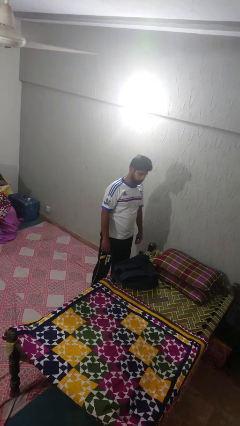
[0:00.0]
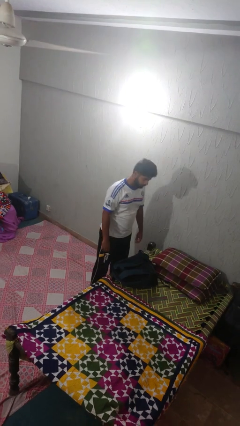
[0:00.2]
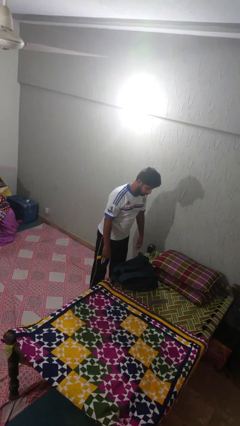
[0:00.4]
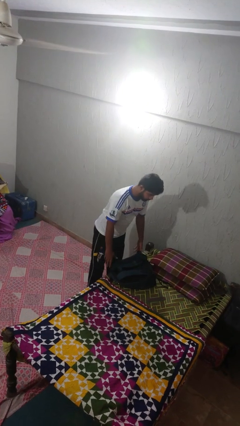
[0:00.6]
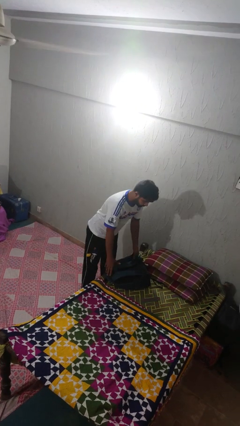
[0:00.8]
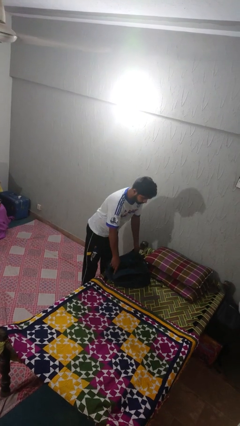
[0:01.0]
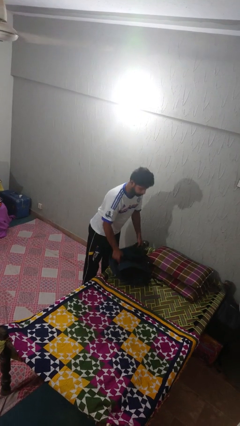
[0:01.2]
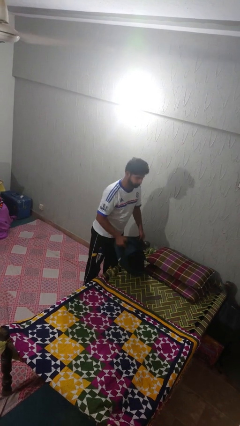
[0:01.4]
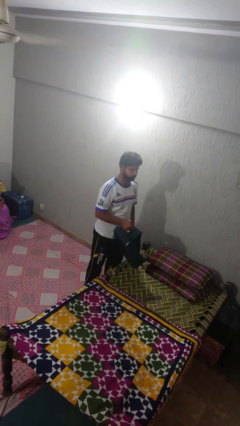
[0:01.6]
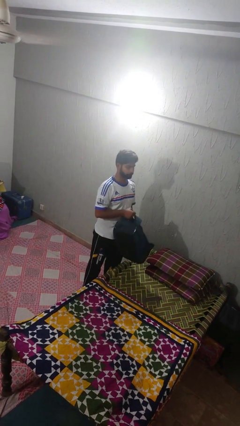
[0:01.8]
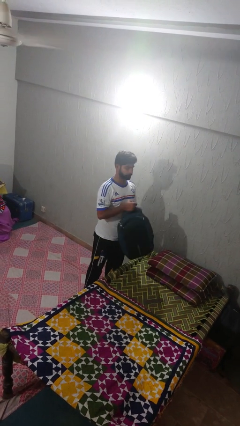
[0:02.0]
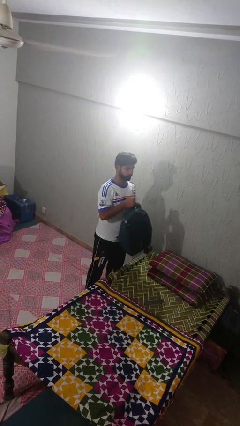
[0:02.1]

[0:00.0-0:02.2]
person picks up object from bed

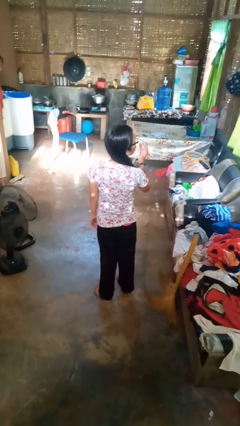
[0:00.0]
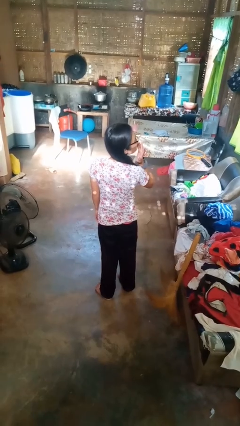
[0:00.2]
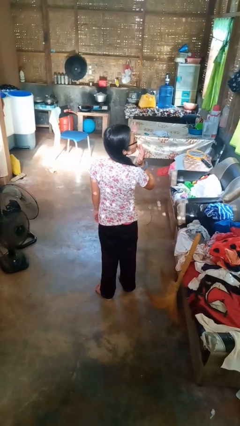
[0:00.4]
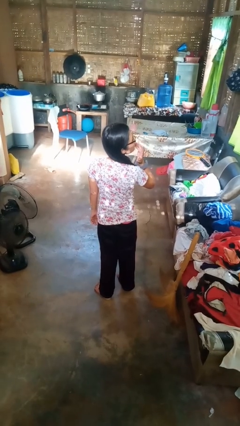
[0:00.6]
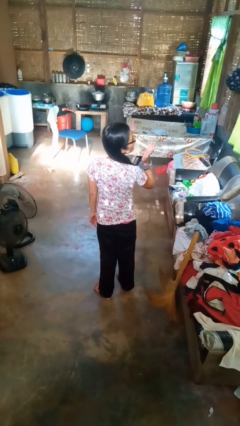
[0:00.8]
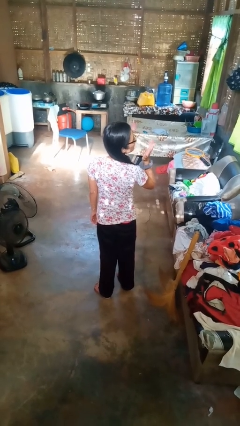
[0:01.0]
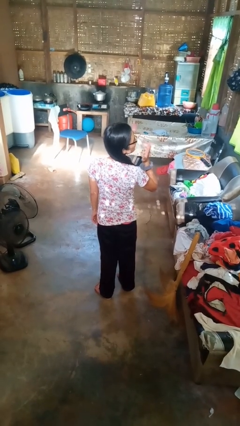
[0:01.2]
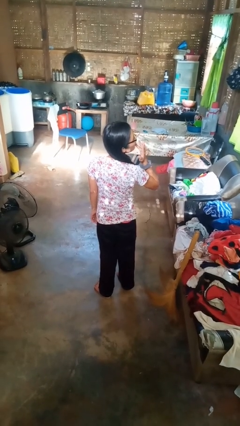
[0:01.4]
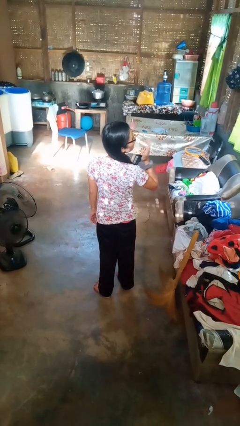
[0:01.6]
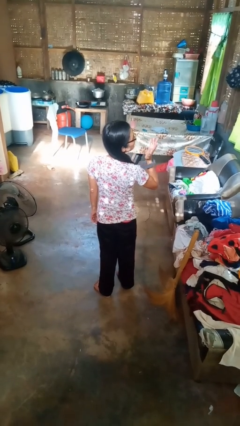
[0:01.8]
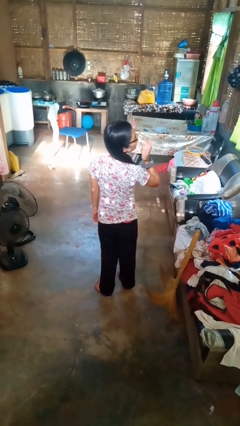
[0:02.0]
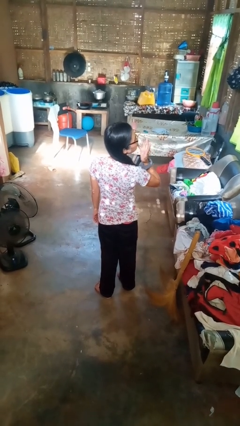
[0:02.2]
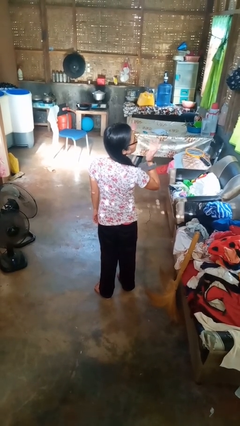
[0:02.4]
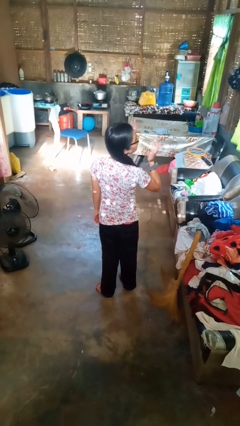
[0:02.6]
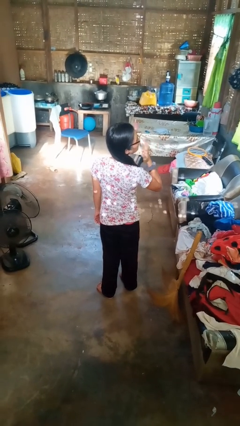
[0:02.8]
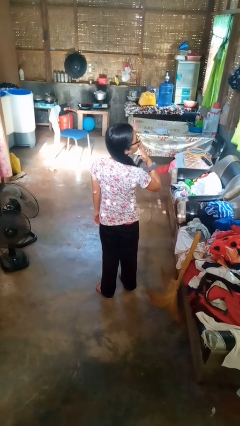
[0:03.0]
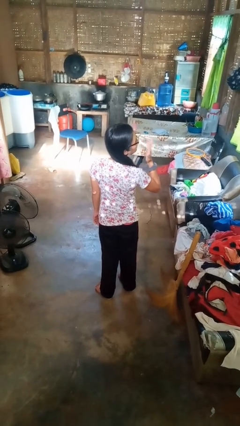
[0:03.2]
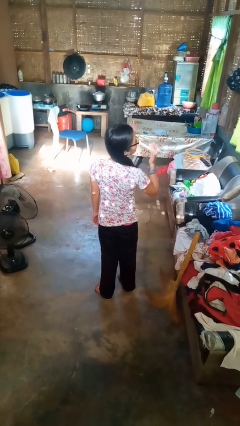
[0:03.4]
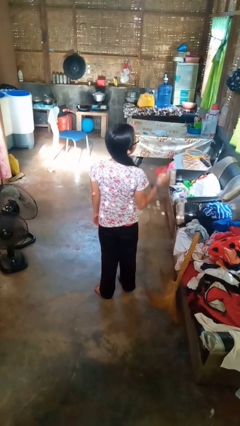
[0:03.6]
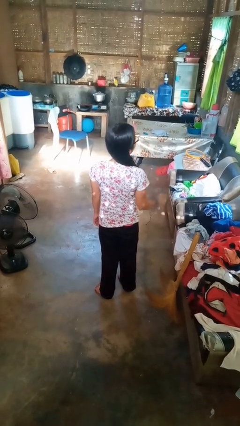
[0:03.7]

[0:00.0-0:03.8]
person licks fingers

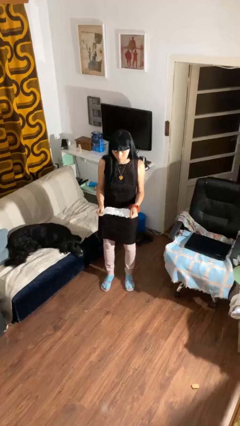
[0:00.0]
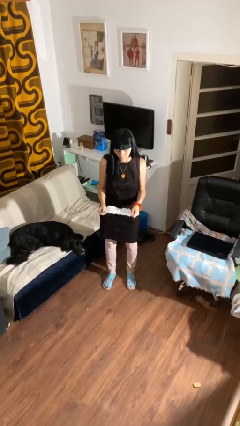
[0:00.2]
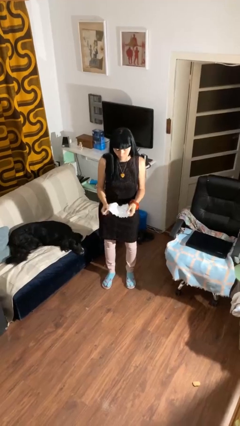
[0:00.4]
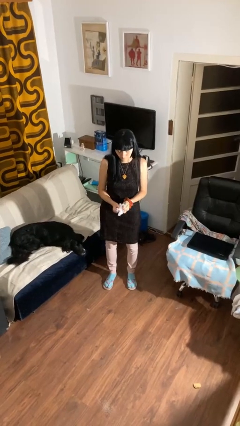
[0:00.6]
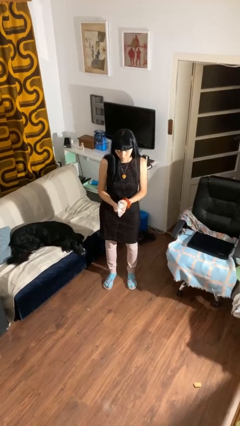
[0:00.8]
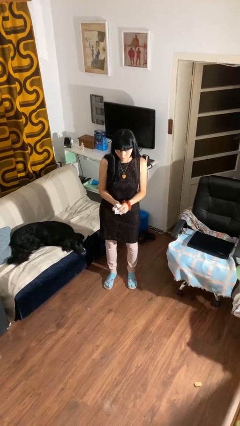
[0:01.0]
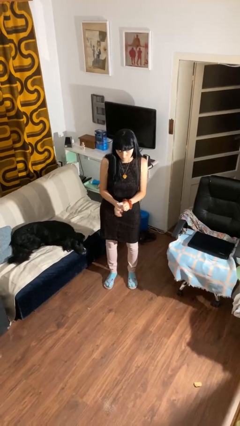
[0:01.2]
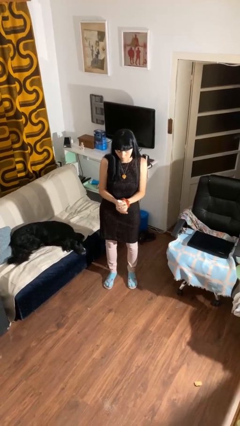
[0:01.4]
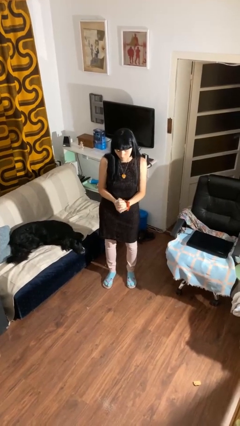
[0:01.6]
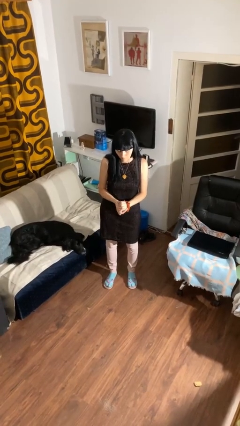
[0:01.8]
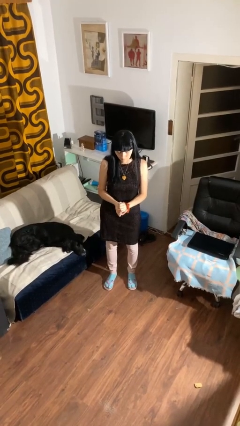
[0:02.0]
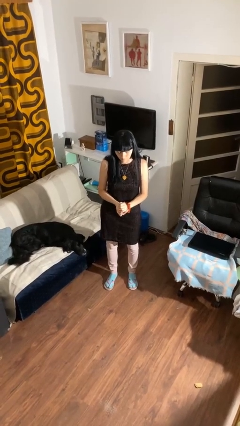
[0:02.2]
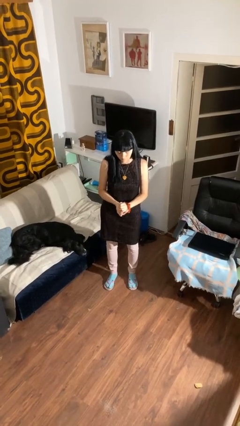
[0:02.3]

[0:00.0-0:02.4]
person crumples paper

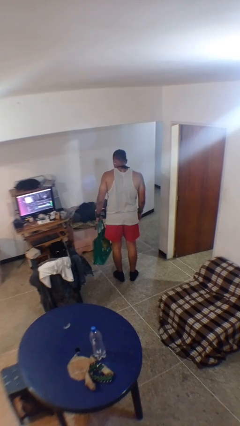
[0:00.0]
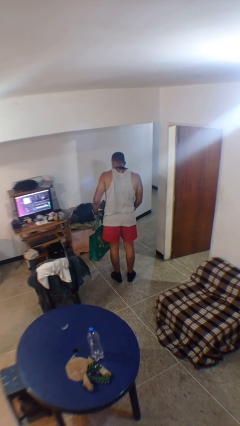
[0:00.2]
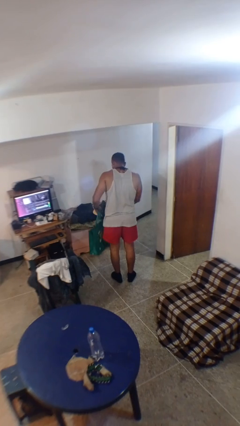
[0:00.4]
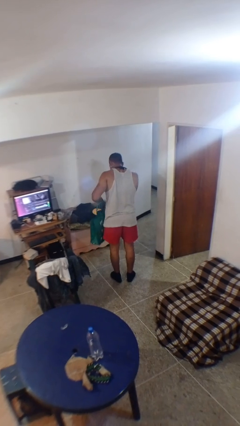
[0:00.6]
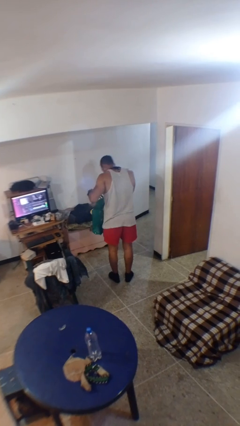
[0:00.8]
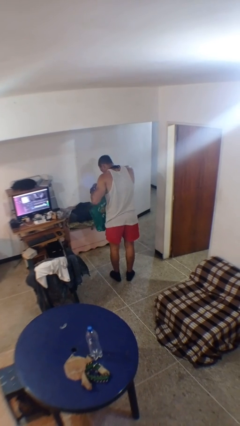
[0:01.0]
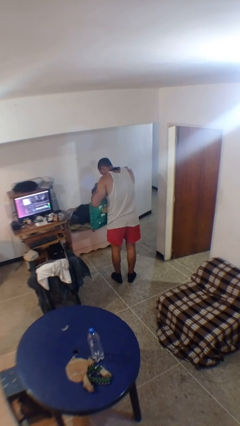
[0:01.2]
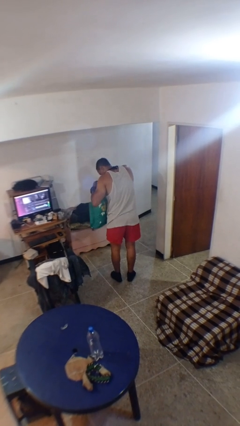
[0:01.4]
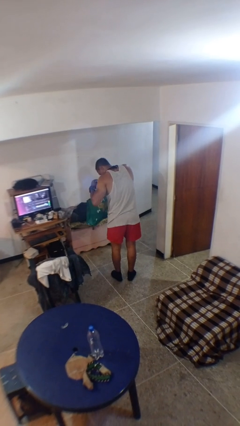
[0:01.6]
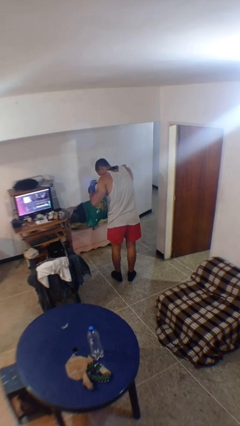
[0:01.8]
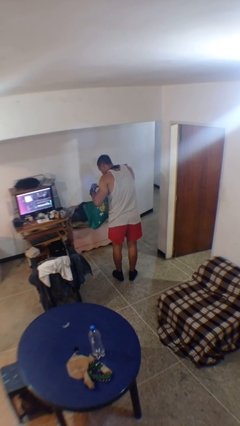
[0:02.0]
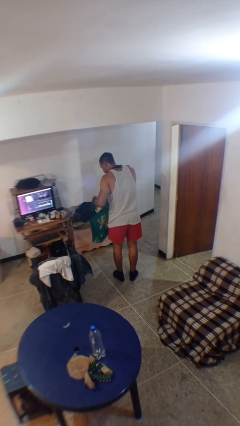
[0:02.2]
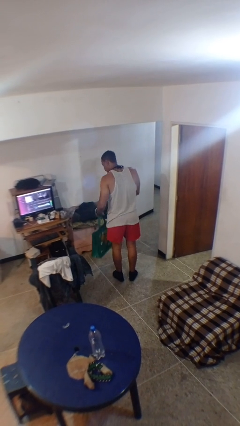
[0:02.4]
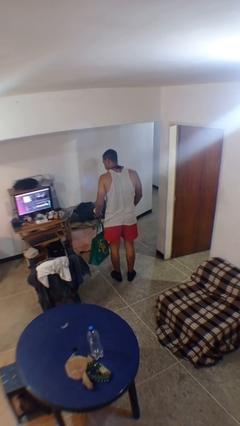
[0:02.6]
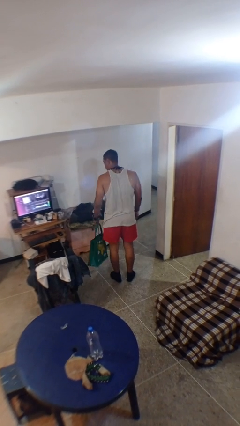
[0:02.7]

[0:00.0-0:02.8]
person searches in bag

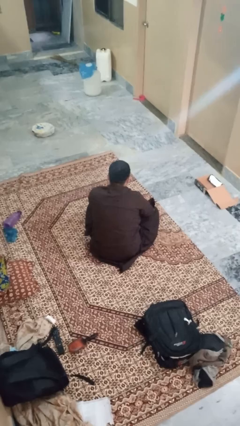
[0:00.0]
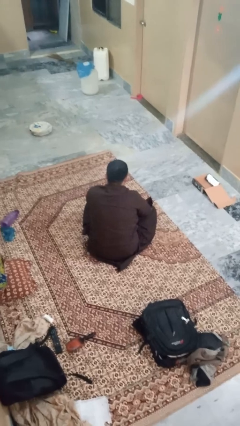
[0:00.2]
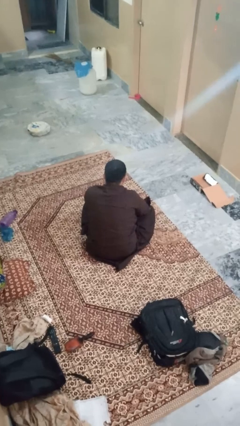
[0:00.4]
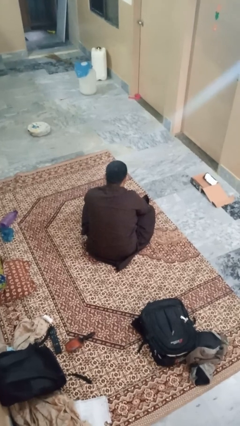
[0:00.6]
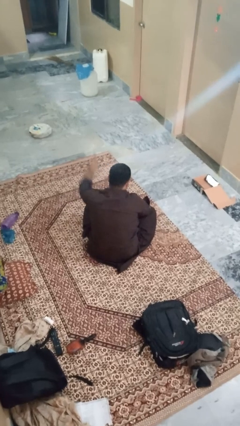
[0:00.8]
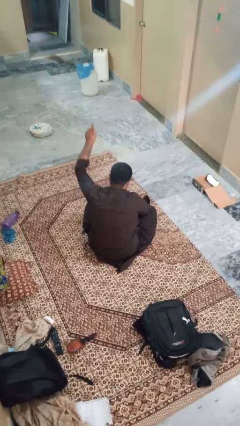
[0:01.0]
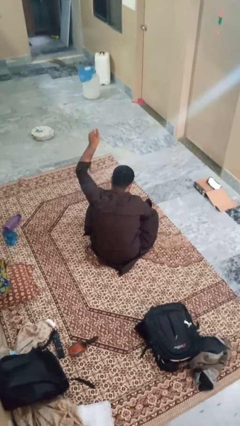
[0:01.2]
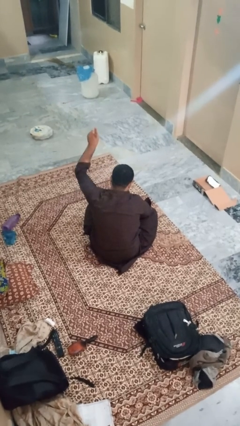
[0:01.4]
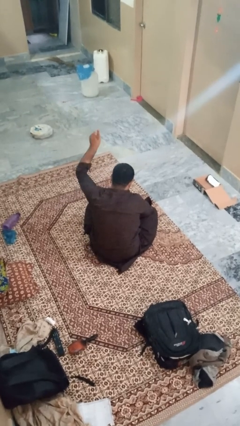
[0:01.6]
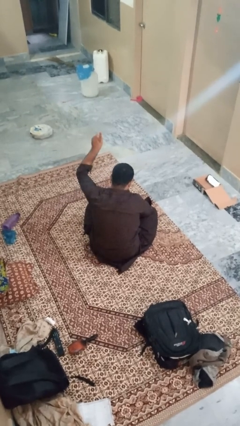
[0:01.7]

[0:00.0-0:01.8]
person gestures number one

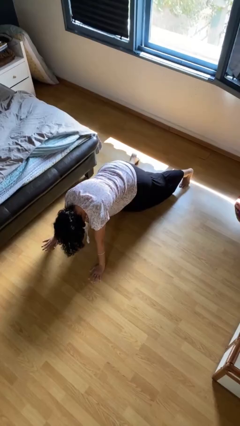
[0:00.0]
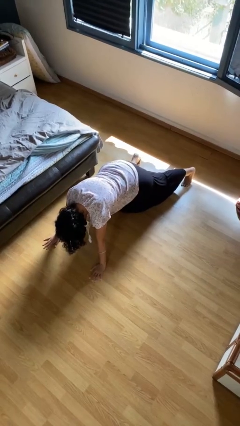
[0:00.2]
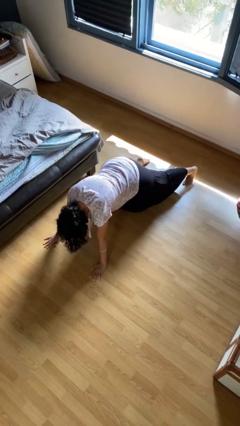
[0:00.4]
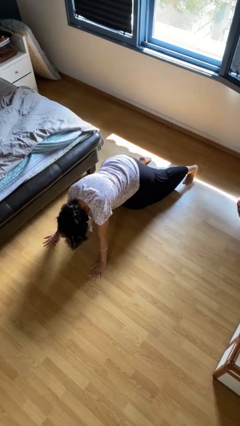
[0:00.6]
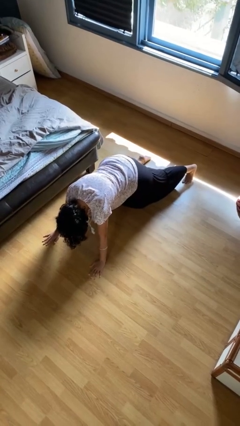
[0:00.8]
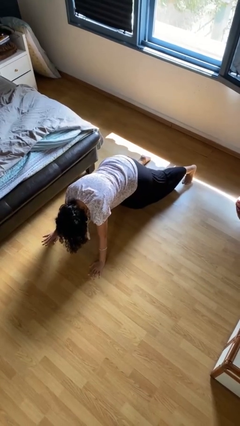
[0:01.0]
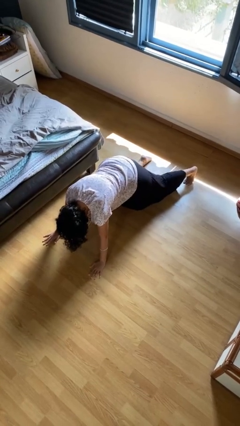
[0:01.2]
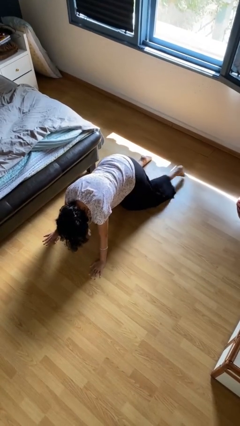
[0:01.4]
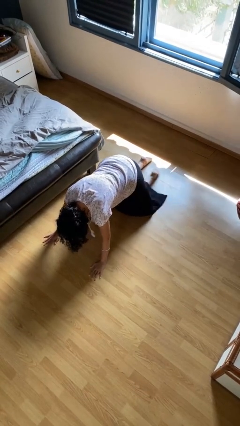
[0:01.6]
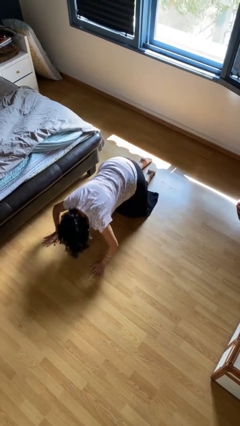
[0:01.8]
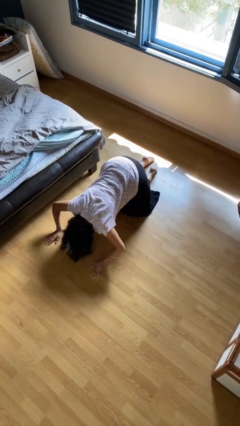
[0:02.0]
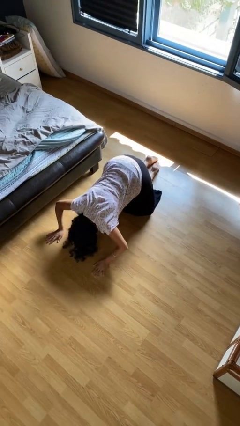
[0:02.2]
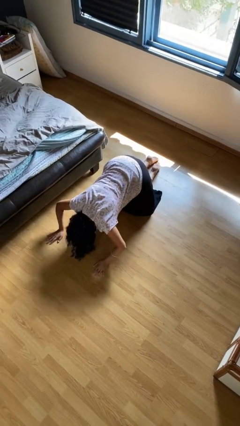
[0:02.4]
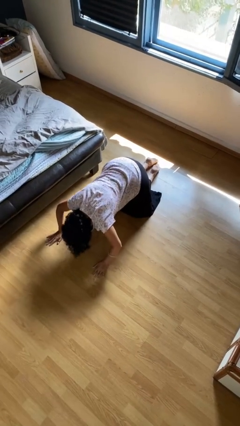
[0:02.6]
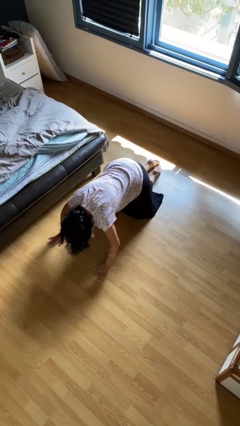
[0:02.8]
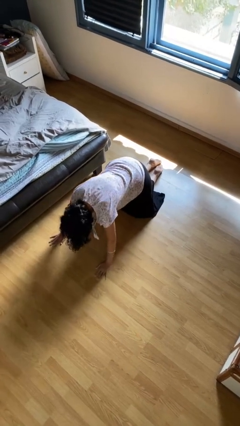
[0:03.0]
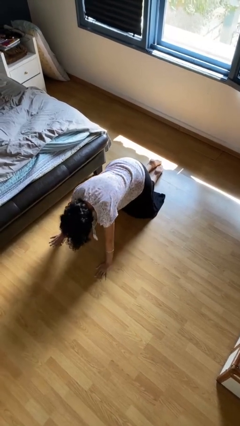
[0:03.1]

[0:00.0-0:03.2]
person exercises with pushup

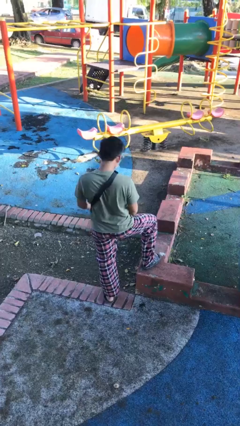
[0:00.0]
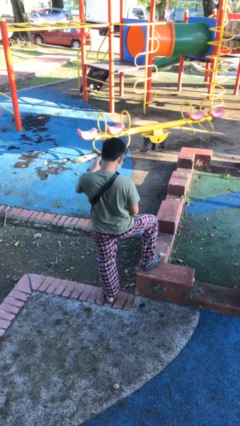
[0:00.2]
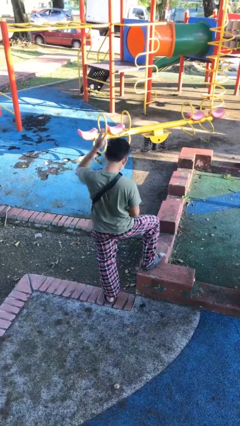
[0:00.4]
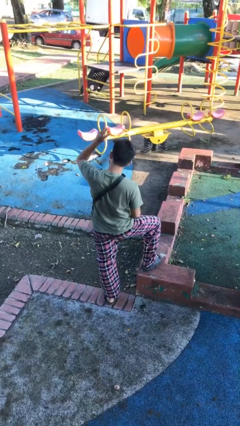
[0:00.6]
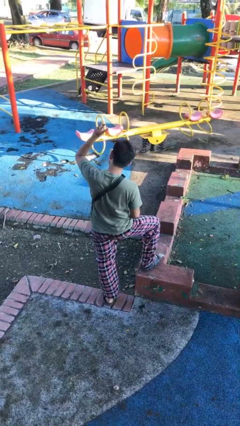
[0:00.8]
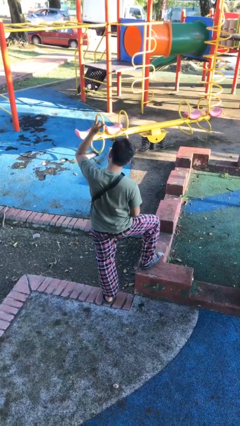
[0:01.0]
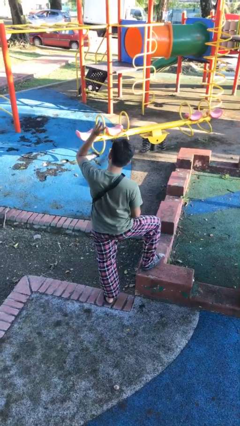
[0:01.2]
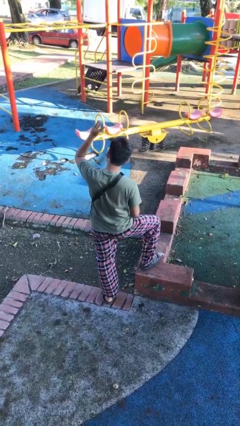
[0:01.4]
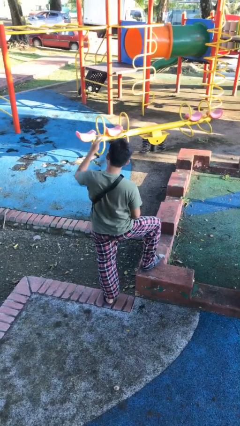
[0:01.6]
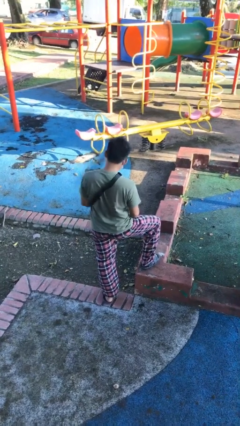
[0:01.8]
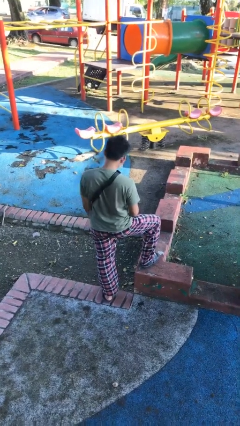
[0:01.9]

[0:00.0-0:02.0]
person gestures number three
